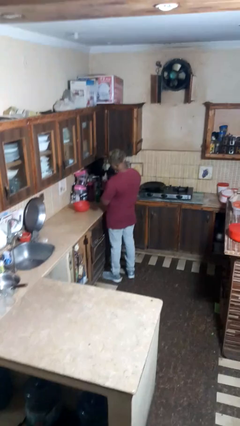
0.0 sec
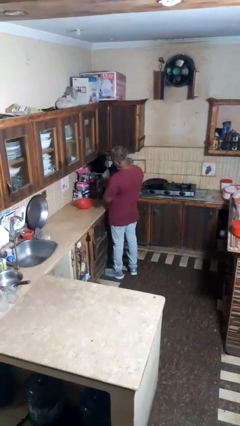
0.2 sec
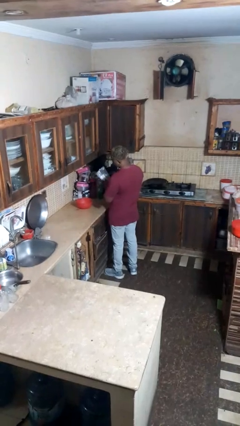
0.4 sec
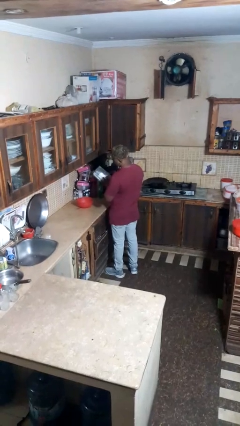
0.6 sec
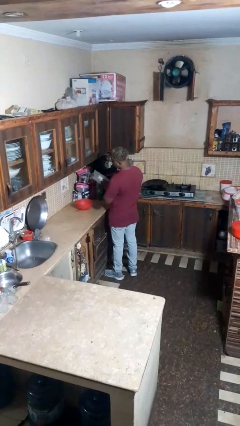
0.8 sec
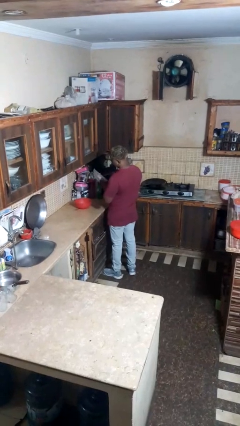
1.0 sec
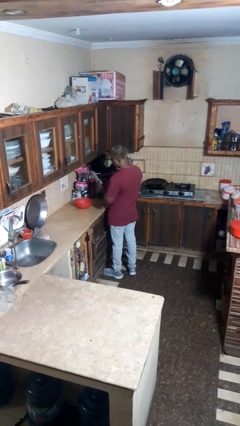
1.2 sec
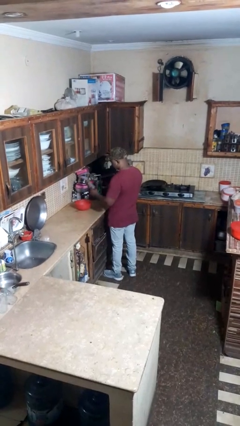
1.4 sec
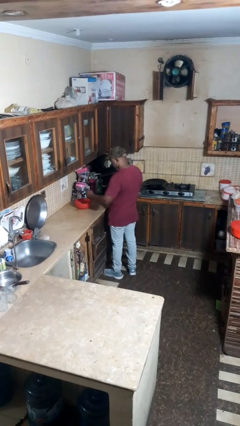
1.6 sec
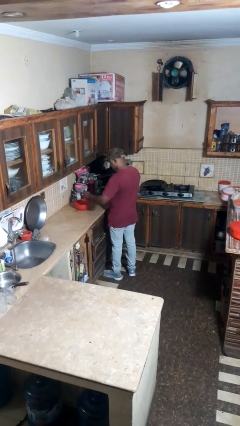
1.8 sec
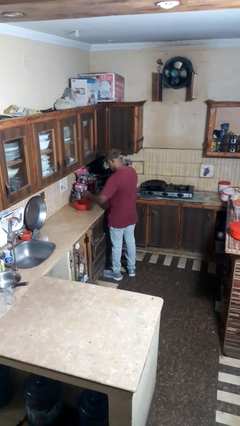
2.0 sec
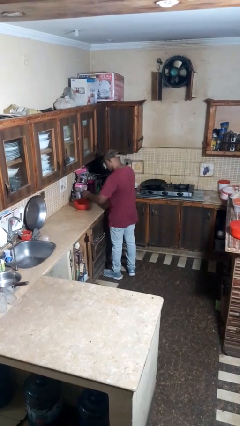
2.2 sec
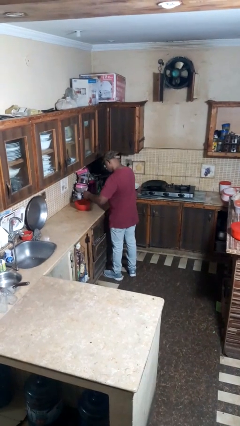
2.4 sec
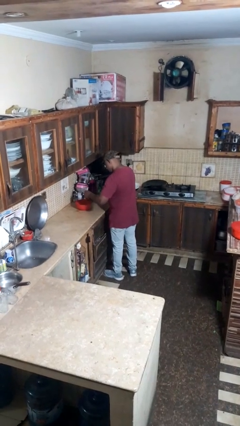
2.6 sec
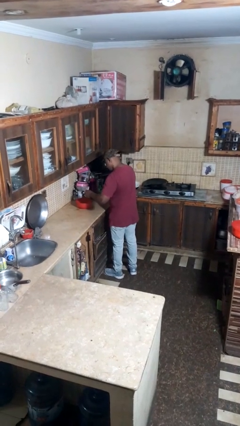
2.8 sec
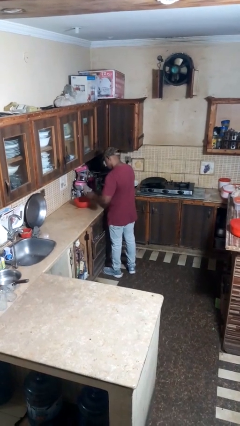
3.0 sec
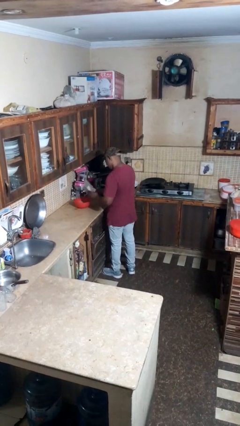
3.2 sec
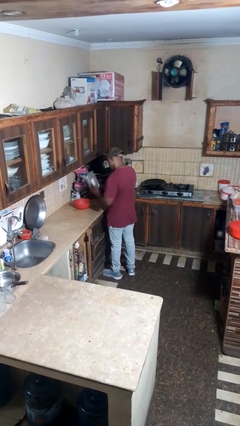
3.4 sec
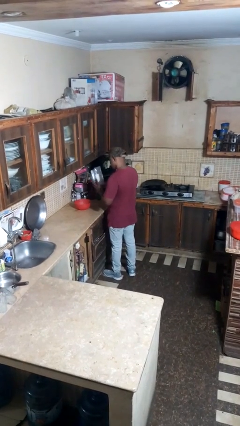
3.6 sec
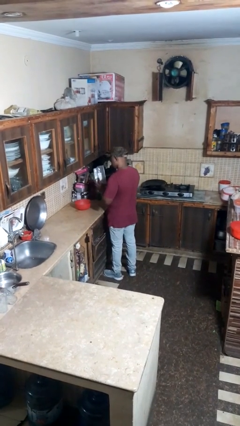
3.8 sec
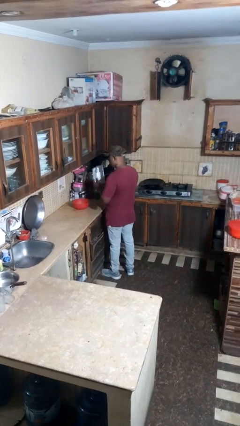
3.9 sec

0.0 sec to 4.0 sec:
person pours into bowl

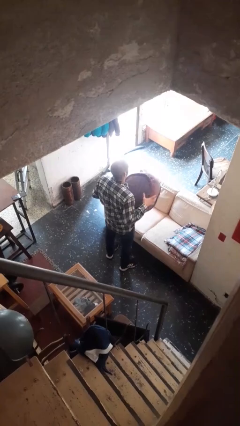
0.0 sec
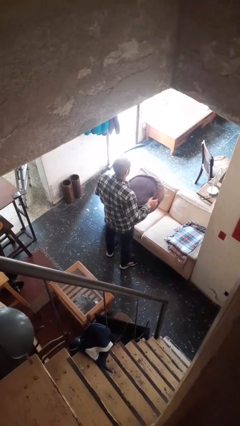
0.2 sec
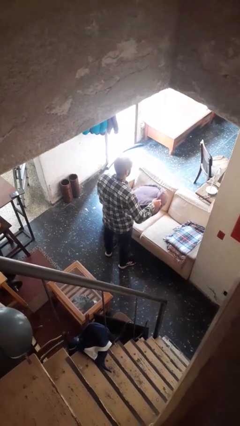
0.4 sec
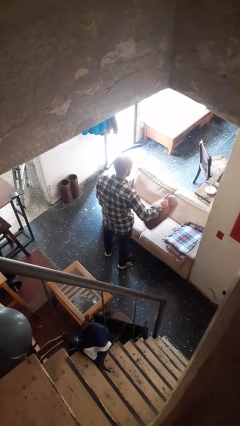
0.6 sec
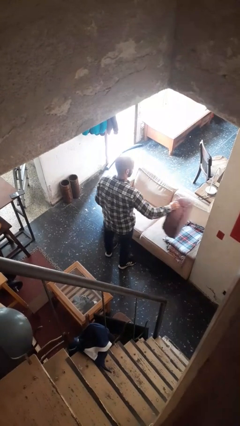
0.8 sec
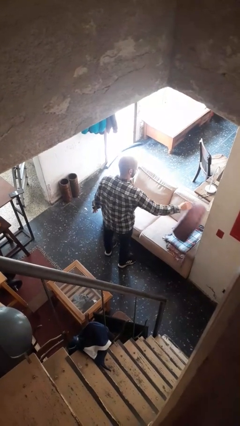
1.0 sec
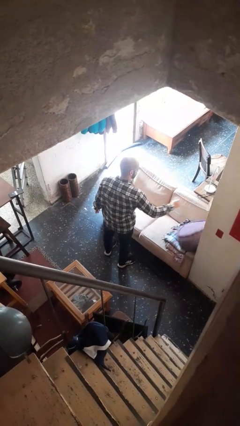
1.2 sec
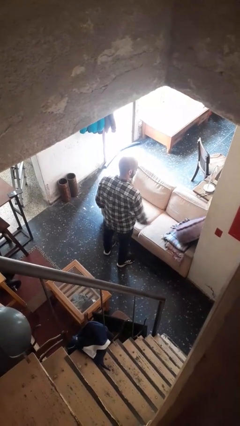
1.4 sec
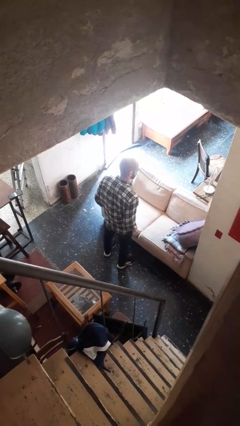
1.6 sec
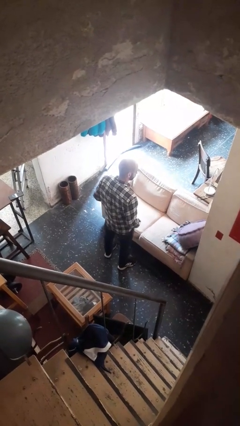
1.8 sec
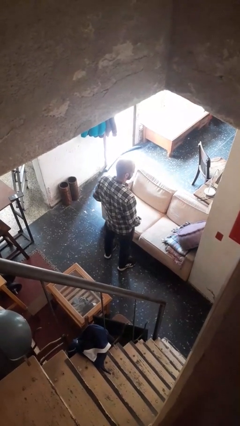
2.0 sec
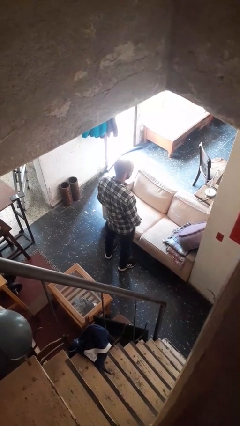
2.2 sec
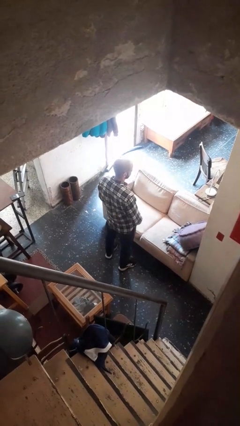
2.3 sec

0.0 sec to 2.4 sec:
person puts down object on couch

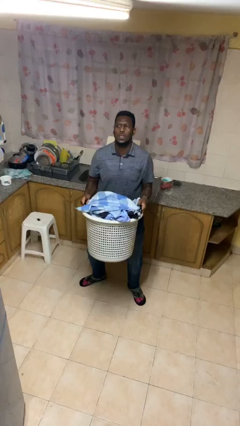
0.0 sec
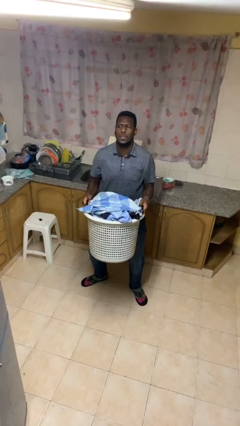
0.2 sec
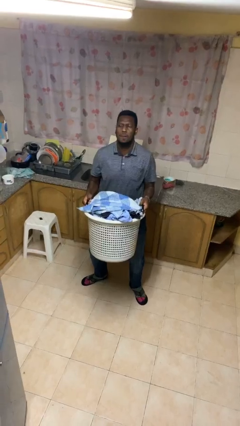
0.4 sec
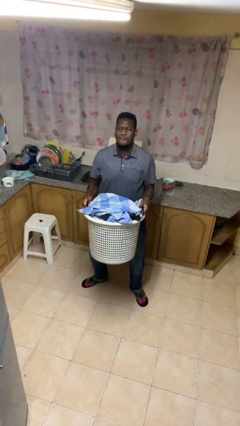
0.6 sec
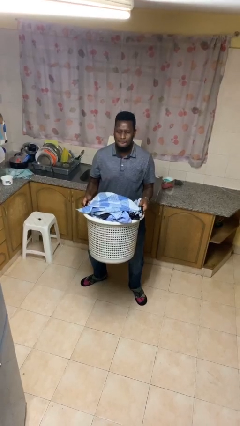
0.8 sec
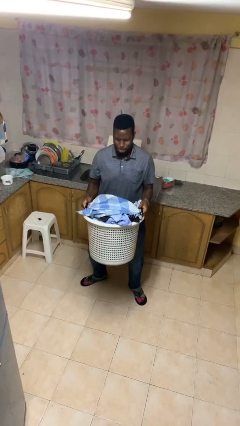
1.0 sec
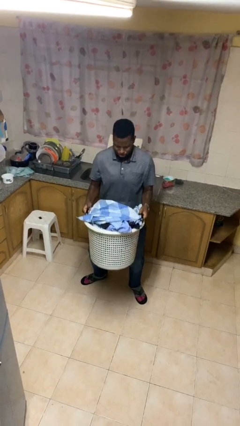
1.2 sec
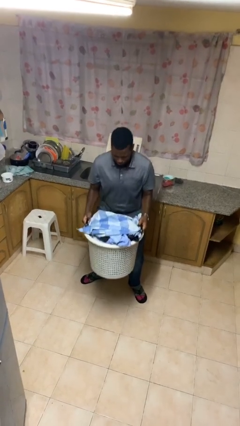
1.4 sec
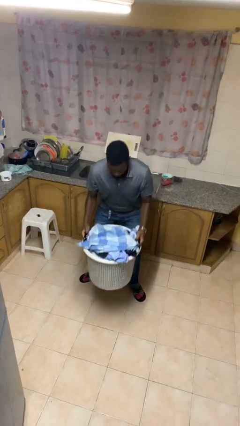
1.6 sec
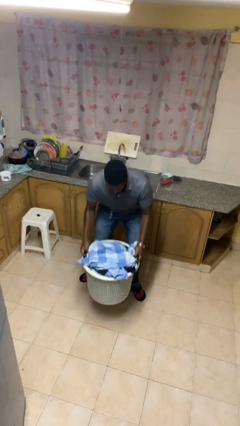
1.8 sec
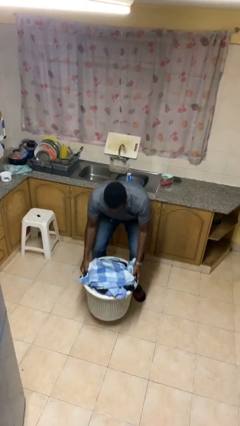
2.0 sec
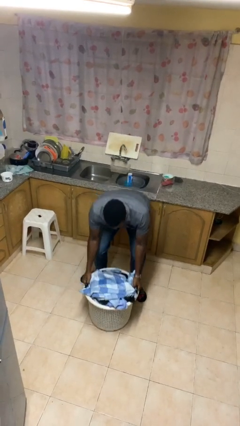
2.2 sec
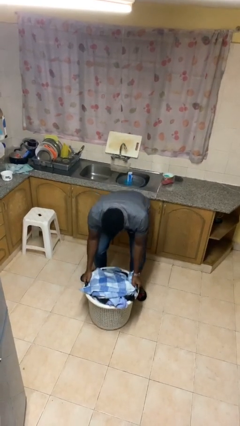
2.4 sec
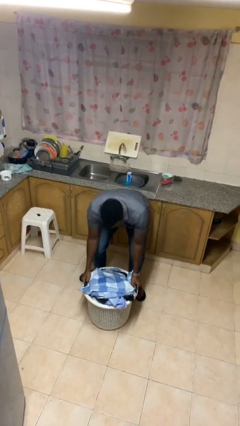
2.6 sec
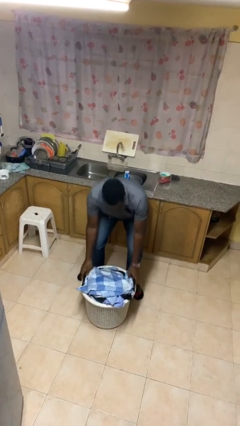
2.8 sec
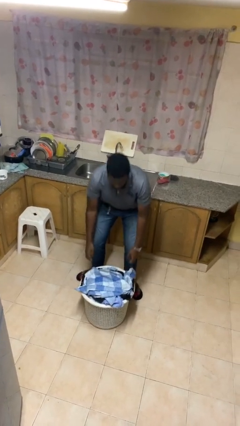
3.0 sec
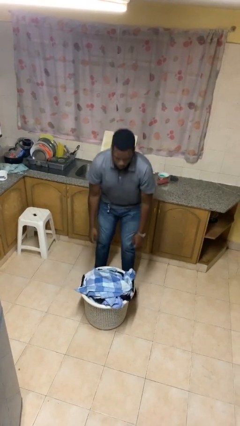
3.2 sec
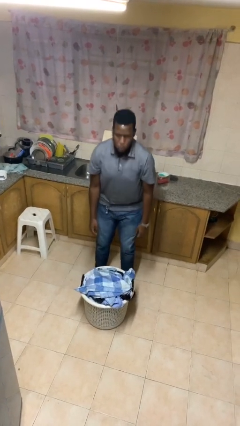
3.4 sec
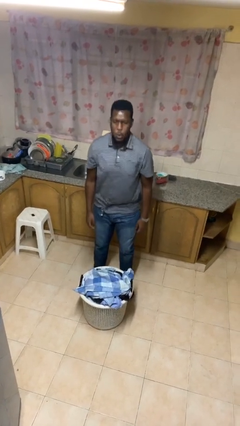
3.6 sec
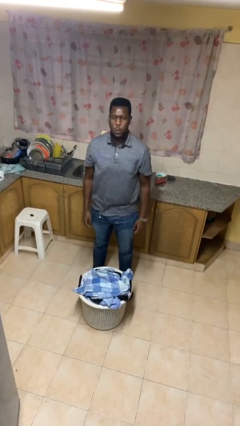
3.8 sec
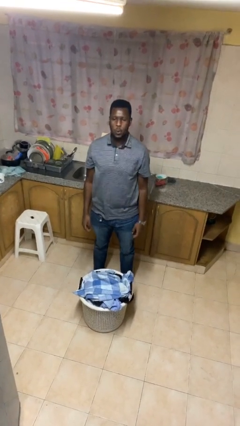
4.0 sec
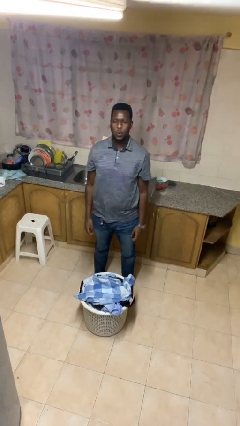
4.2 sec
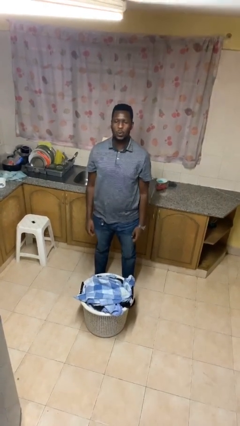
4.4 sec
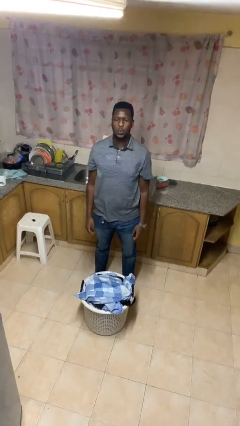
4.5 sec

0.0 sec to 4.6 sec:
person puts down object on floor

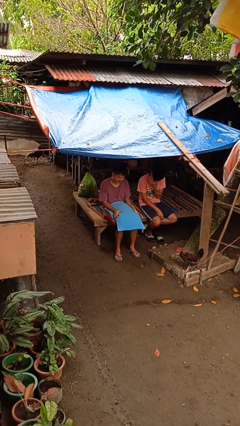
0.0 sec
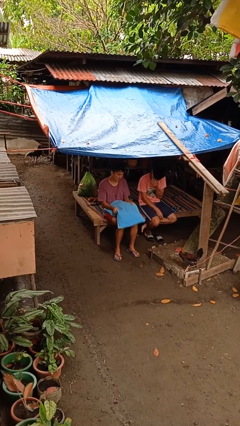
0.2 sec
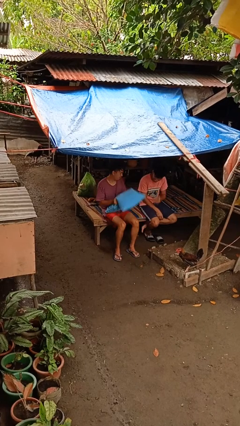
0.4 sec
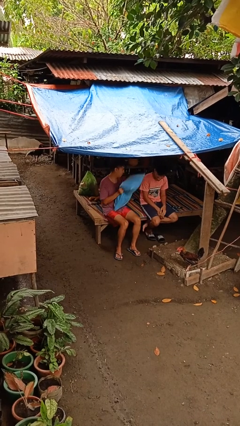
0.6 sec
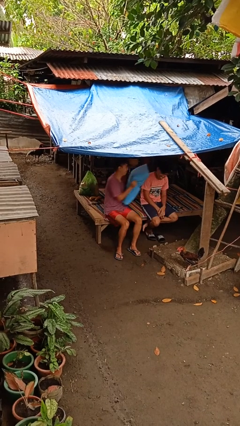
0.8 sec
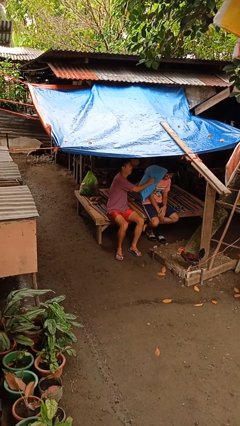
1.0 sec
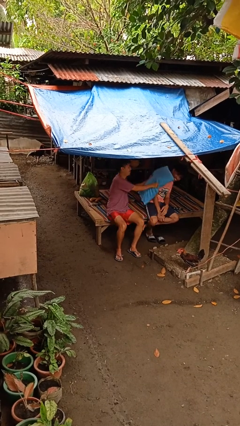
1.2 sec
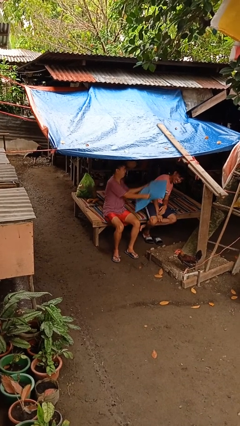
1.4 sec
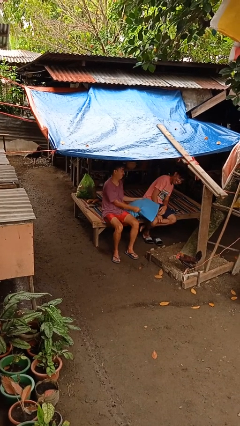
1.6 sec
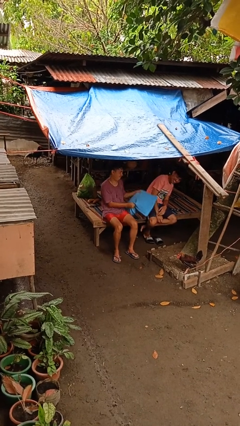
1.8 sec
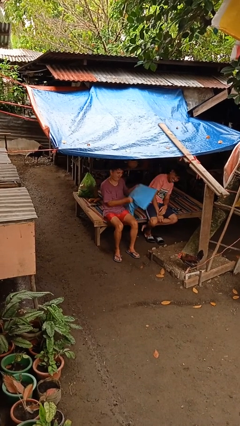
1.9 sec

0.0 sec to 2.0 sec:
person hits person with pillow

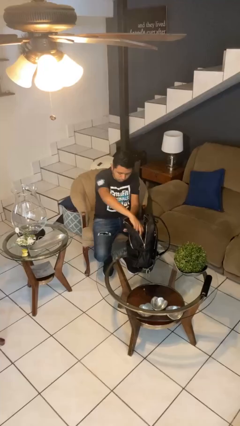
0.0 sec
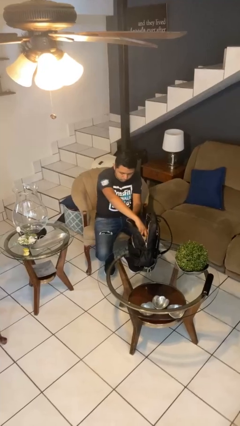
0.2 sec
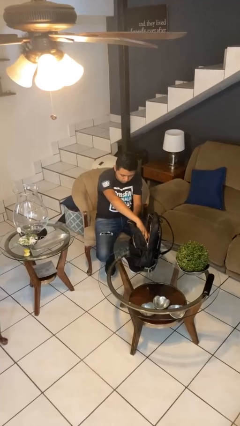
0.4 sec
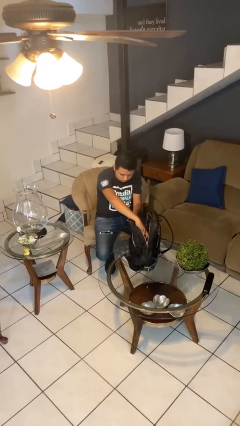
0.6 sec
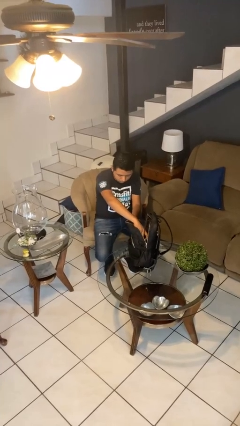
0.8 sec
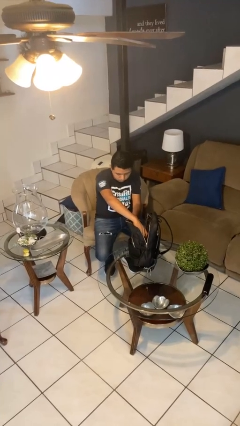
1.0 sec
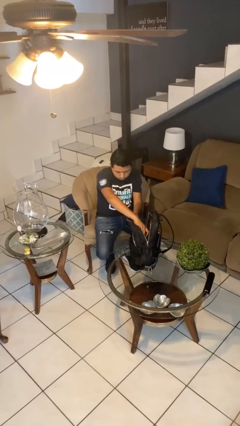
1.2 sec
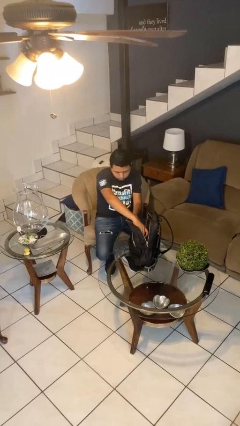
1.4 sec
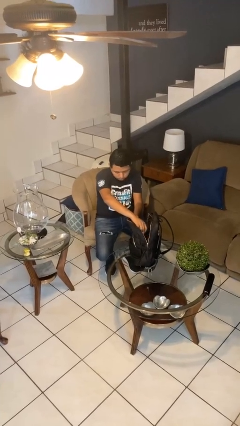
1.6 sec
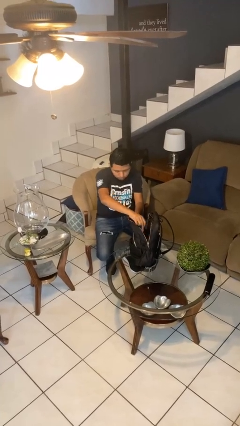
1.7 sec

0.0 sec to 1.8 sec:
person searches in backpack

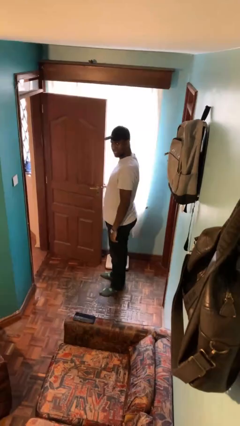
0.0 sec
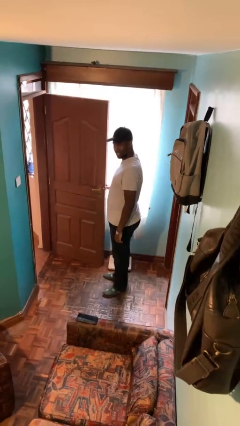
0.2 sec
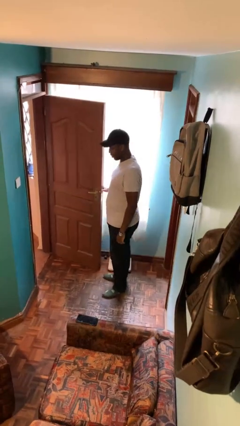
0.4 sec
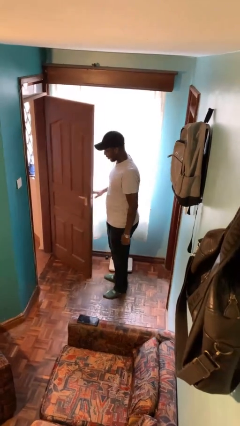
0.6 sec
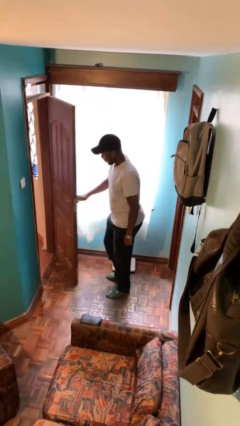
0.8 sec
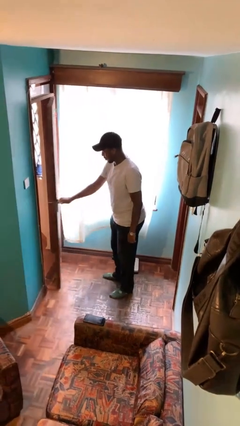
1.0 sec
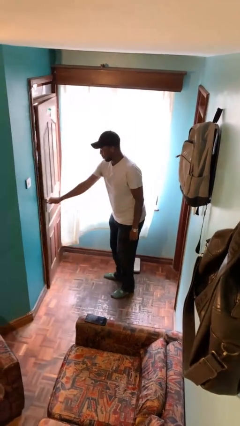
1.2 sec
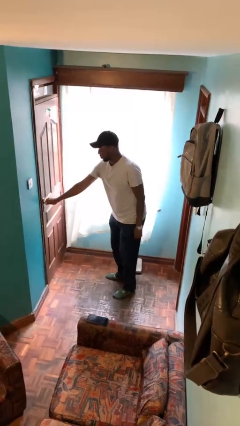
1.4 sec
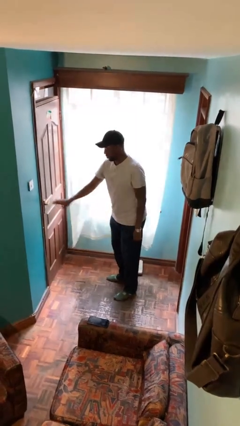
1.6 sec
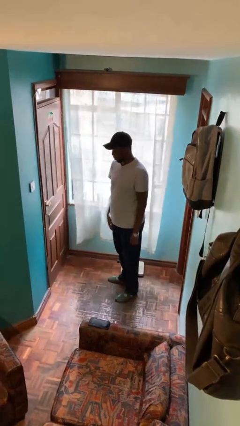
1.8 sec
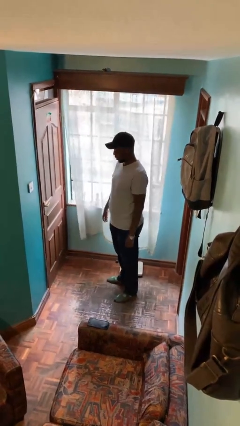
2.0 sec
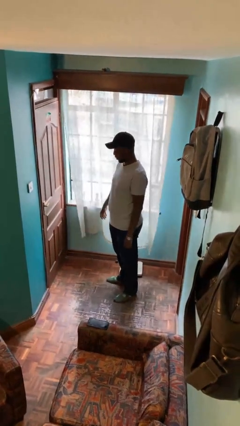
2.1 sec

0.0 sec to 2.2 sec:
person closes facility door

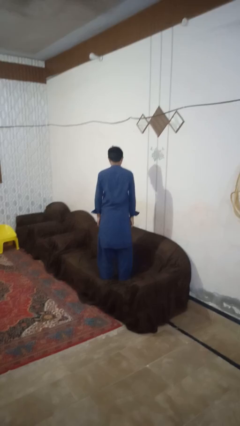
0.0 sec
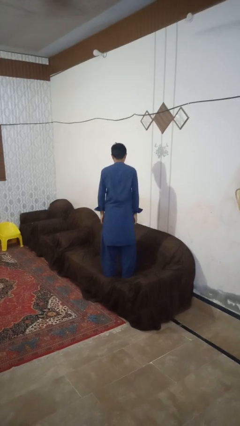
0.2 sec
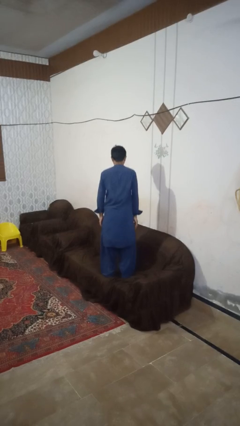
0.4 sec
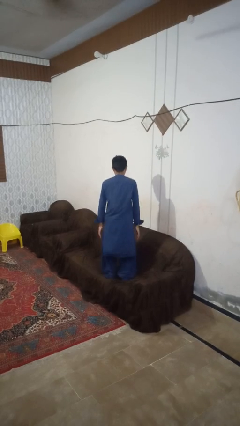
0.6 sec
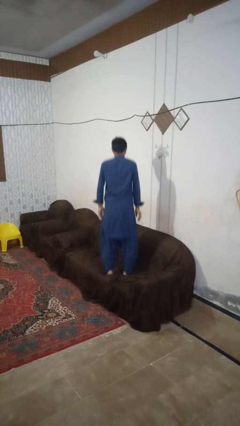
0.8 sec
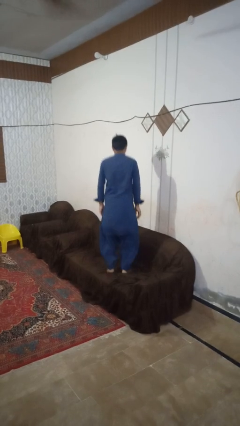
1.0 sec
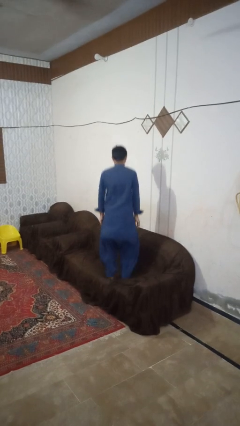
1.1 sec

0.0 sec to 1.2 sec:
person jumps on couch
